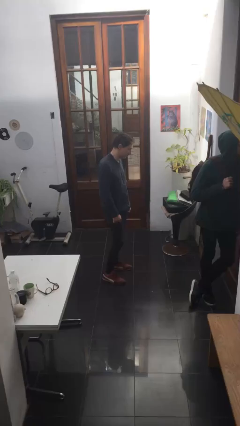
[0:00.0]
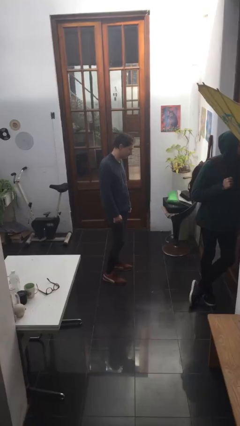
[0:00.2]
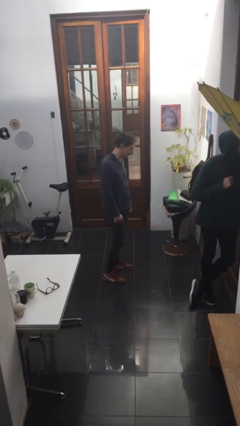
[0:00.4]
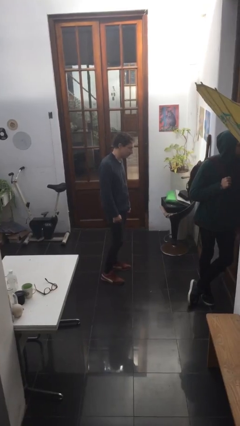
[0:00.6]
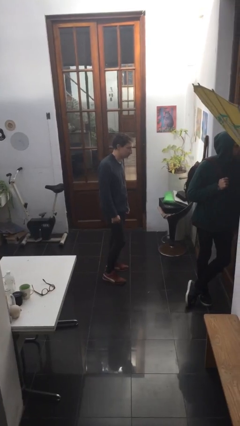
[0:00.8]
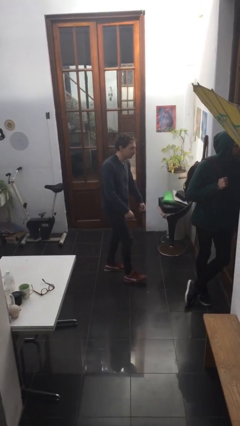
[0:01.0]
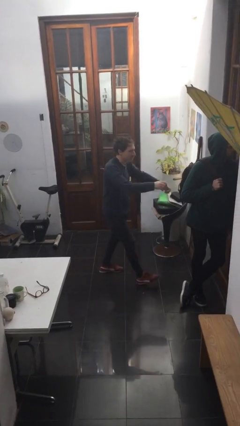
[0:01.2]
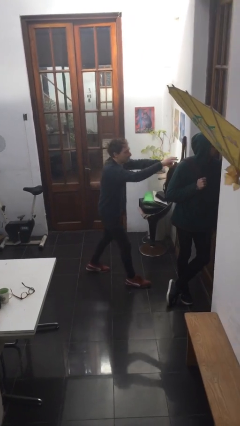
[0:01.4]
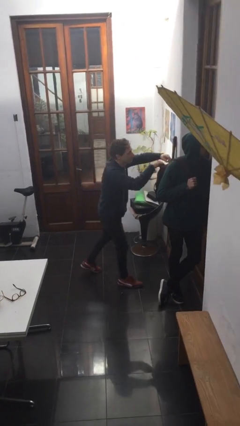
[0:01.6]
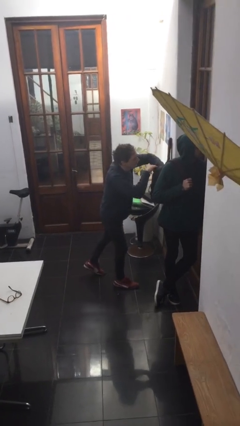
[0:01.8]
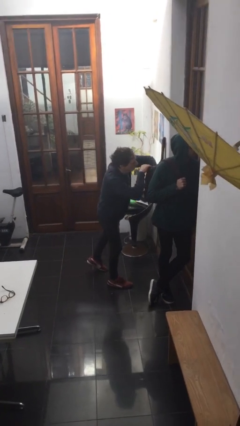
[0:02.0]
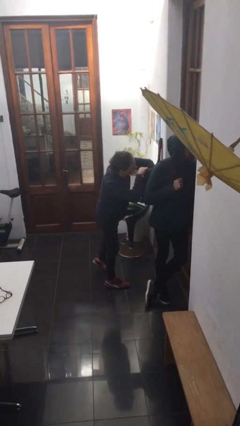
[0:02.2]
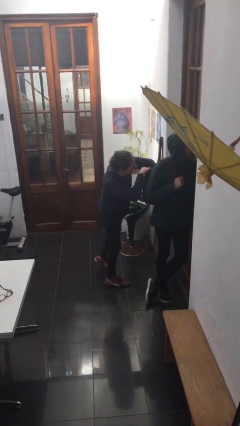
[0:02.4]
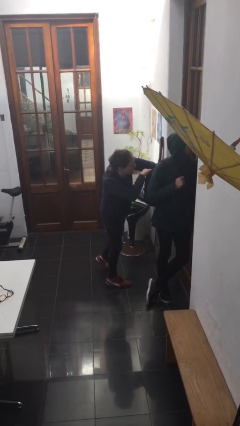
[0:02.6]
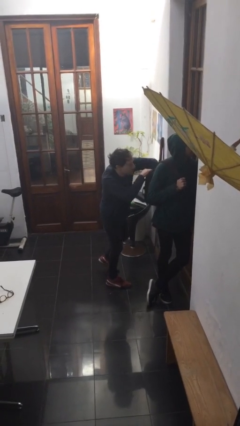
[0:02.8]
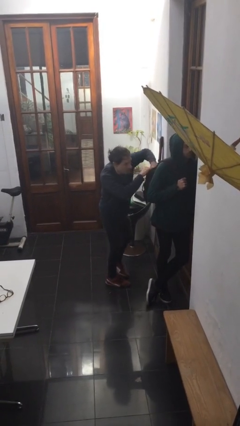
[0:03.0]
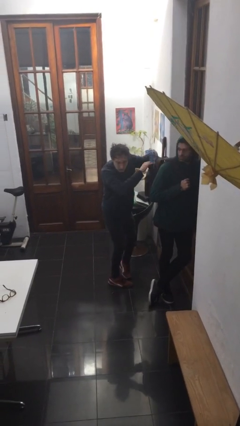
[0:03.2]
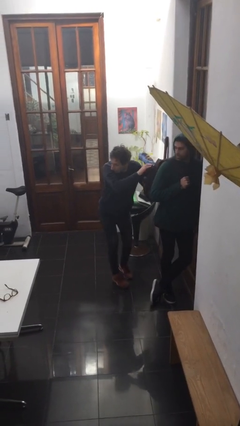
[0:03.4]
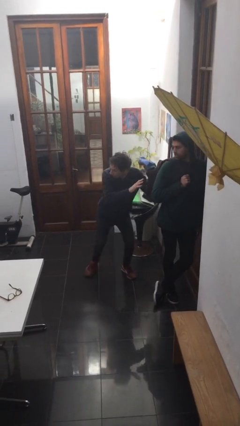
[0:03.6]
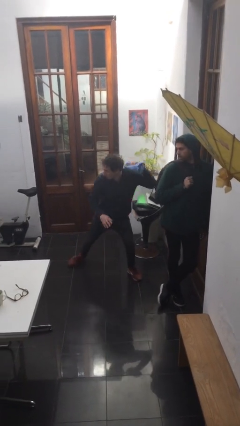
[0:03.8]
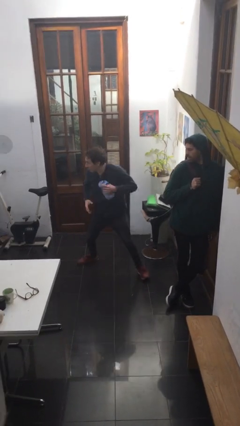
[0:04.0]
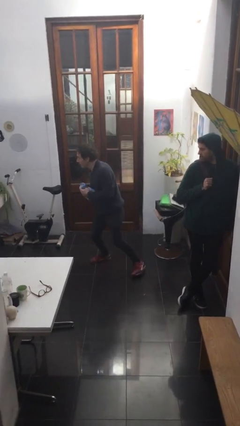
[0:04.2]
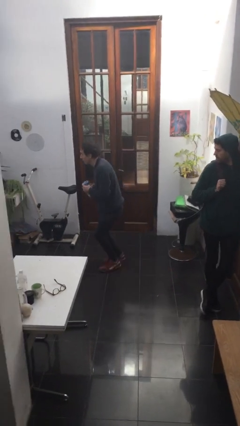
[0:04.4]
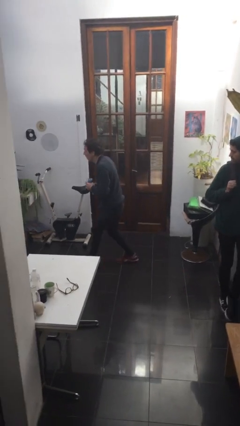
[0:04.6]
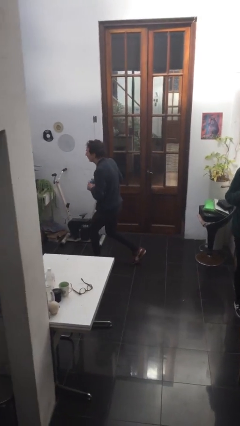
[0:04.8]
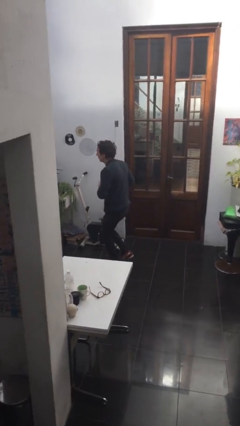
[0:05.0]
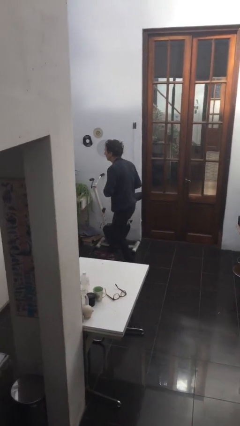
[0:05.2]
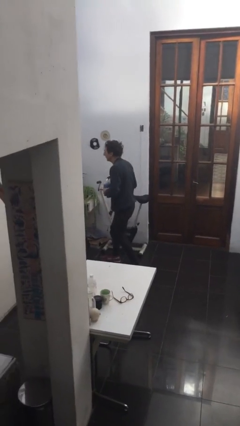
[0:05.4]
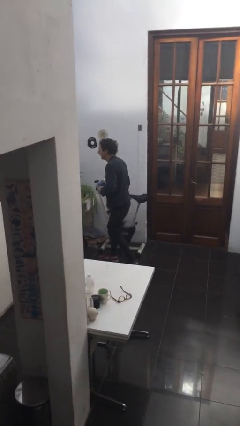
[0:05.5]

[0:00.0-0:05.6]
person steals object from person

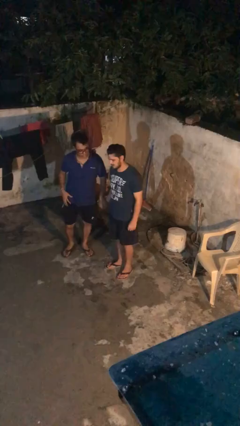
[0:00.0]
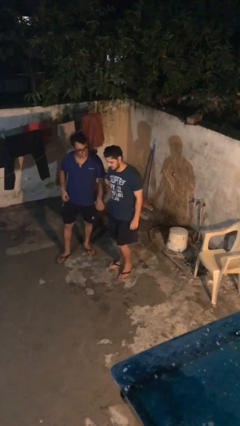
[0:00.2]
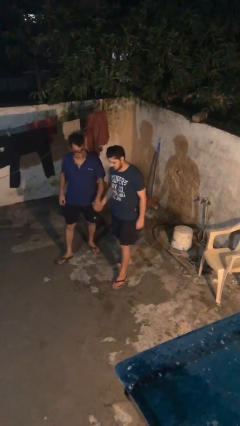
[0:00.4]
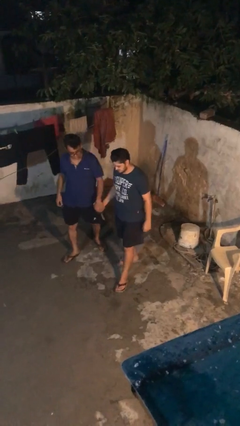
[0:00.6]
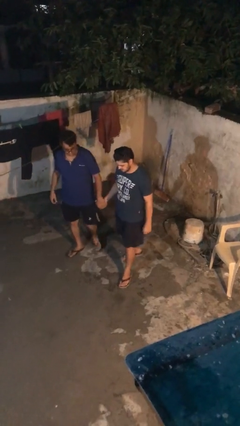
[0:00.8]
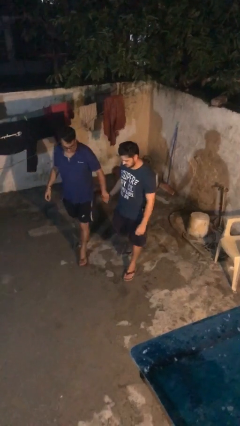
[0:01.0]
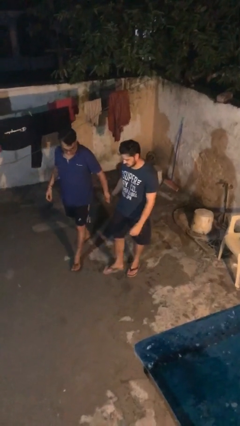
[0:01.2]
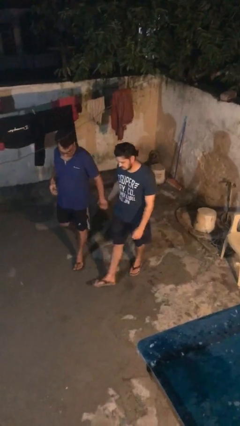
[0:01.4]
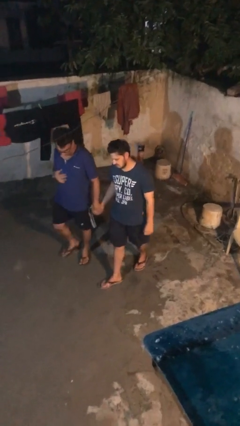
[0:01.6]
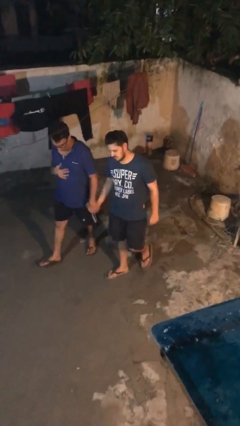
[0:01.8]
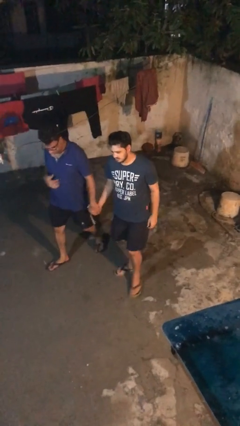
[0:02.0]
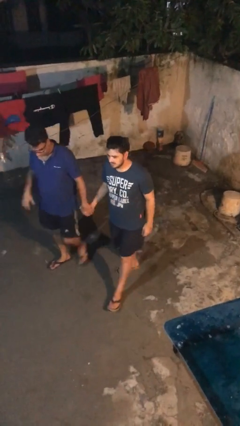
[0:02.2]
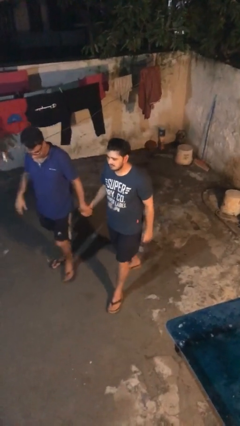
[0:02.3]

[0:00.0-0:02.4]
person holds hand

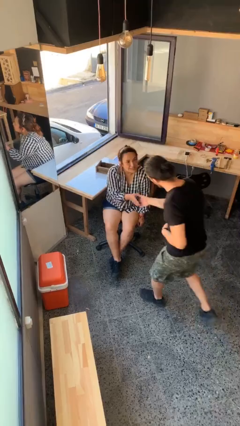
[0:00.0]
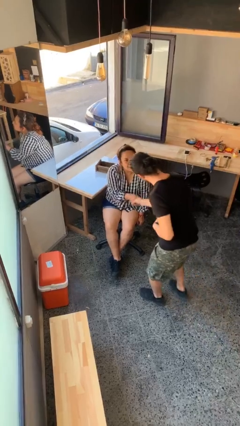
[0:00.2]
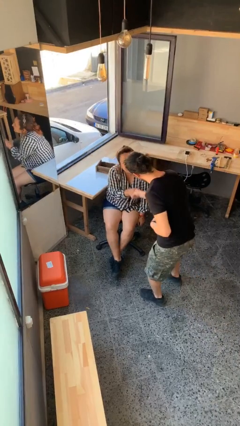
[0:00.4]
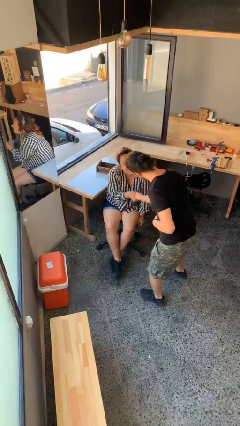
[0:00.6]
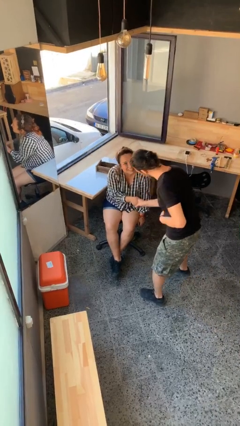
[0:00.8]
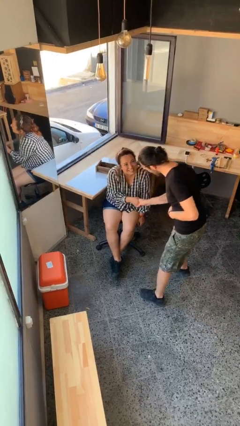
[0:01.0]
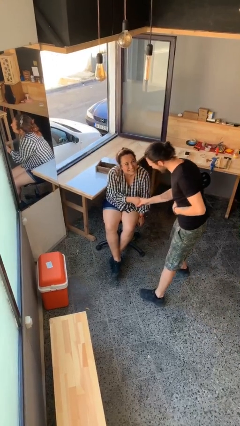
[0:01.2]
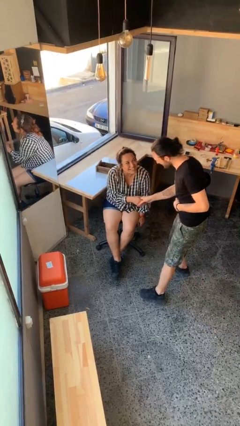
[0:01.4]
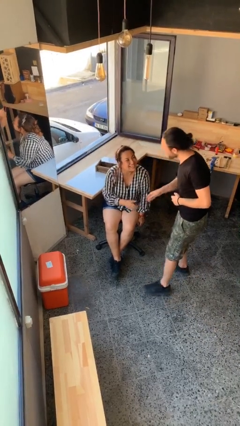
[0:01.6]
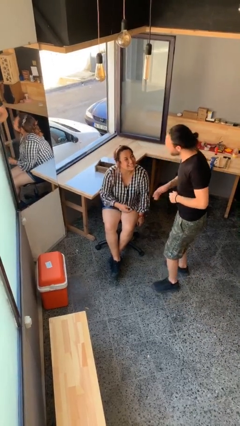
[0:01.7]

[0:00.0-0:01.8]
person shakes hand

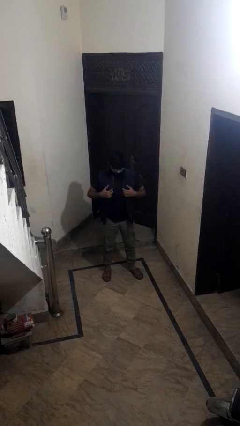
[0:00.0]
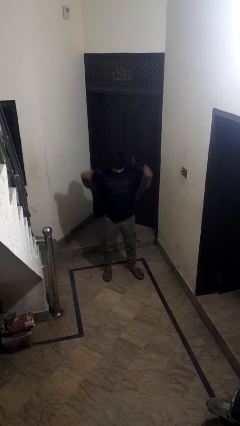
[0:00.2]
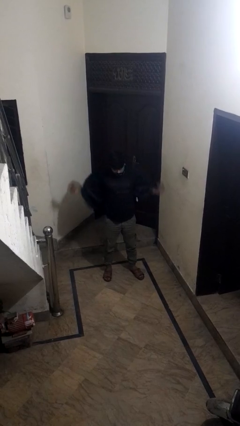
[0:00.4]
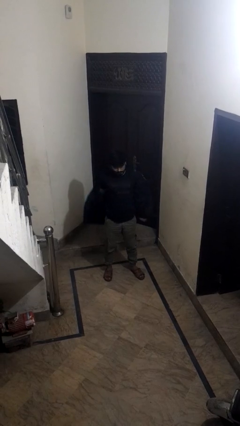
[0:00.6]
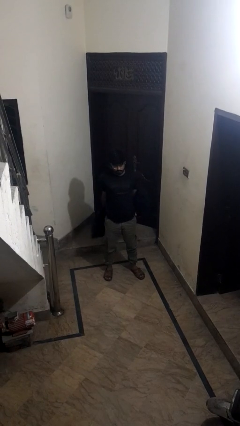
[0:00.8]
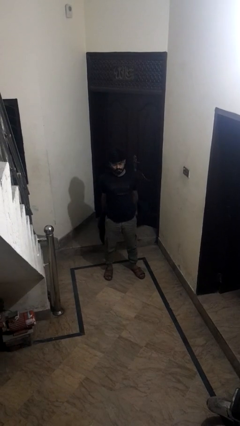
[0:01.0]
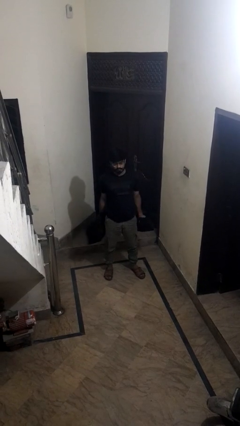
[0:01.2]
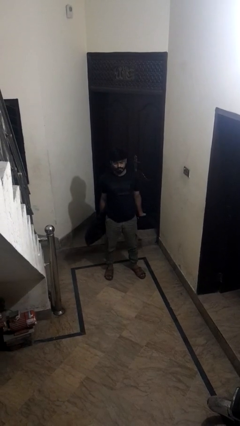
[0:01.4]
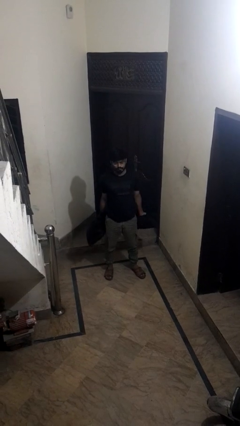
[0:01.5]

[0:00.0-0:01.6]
person takes off jacket

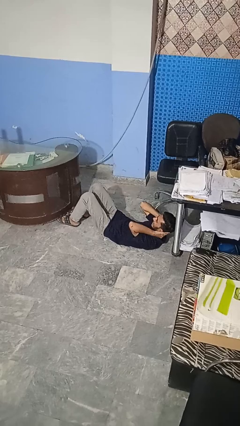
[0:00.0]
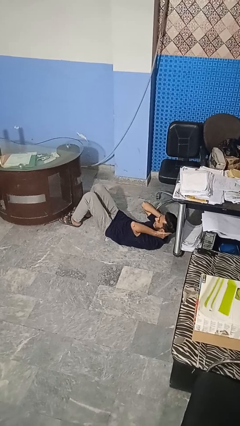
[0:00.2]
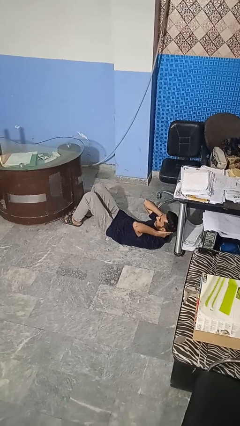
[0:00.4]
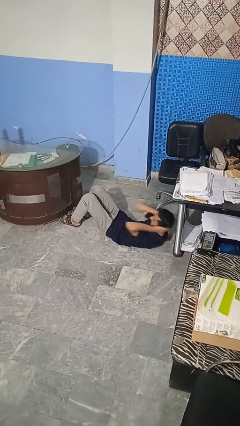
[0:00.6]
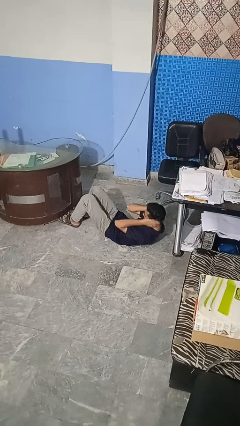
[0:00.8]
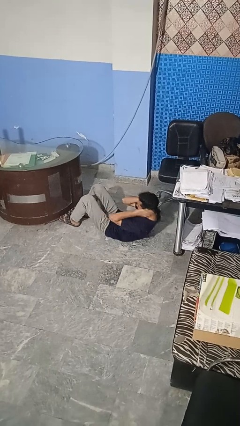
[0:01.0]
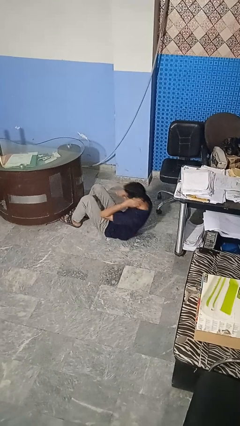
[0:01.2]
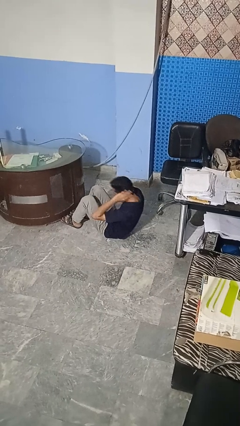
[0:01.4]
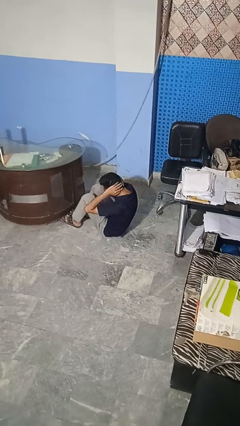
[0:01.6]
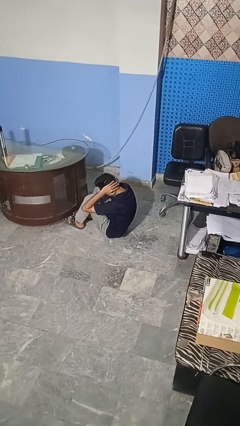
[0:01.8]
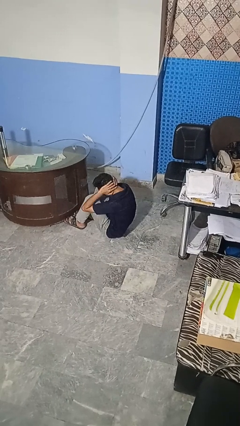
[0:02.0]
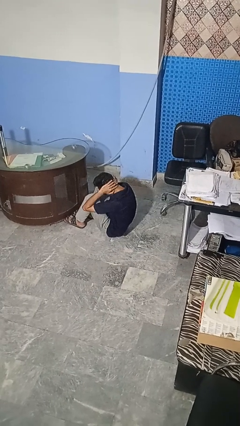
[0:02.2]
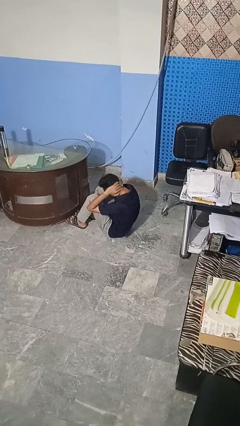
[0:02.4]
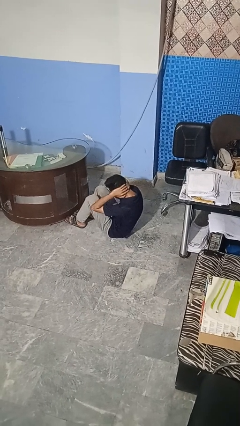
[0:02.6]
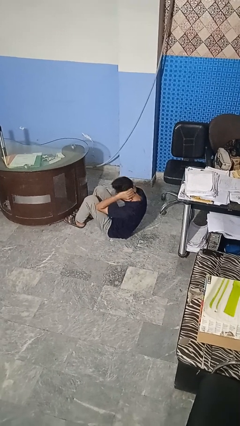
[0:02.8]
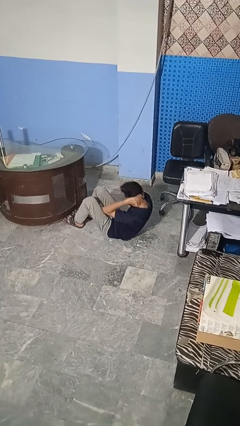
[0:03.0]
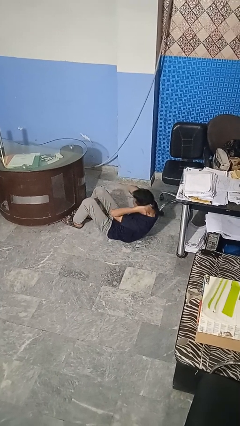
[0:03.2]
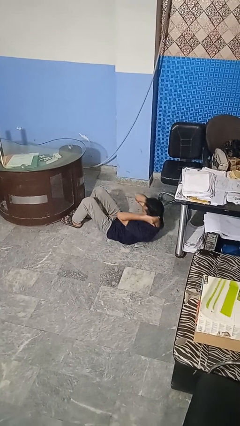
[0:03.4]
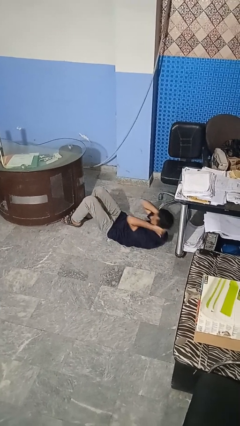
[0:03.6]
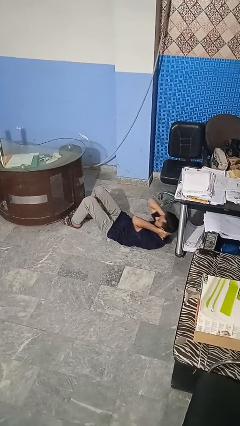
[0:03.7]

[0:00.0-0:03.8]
person exercises with situp

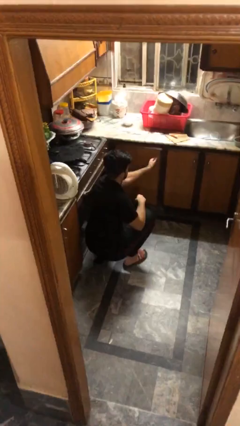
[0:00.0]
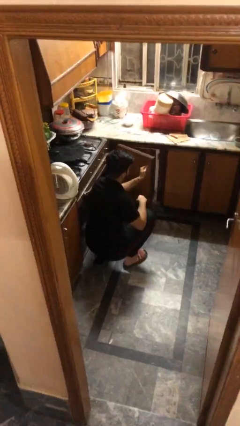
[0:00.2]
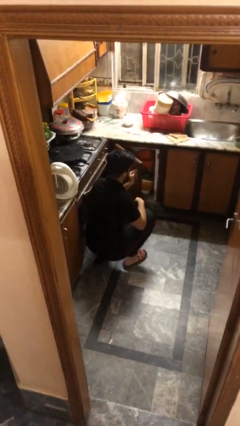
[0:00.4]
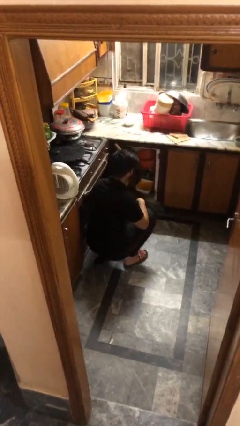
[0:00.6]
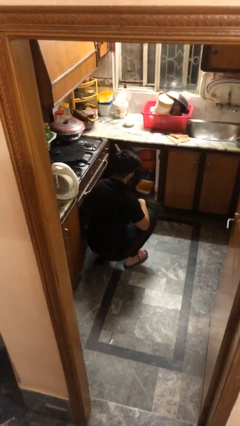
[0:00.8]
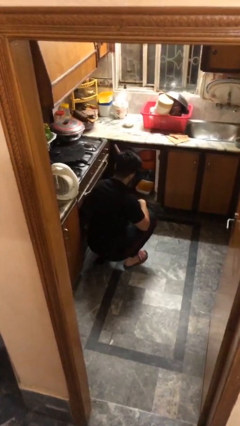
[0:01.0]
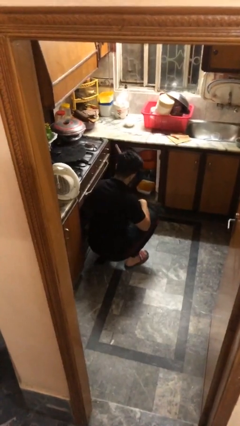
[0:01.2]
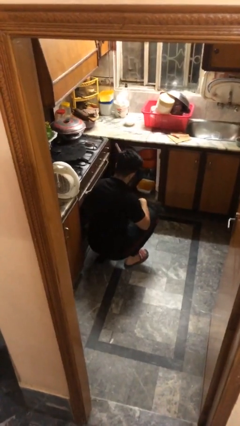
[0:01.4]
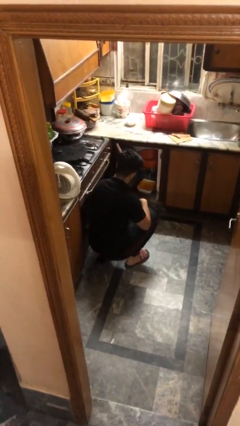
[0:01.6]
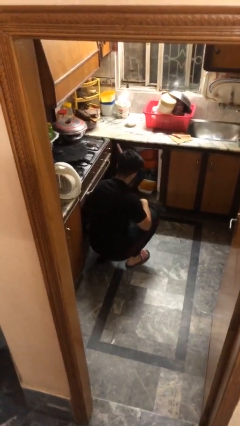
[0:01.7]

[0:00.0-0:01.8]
person opens kitchen drawer

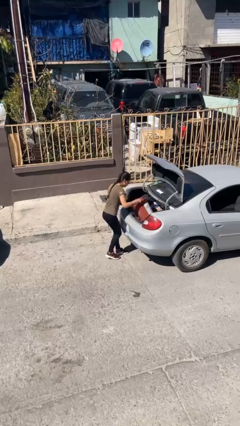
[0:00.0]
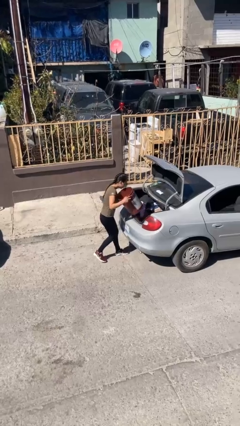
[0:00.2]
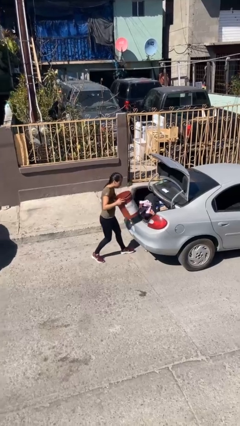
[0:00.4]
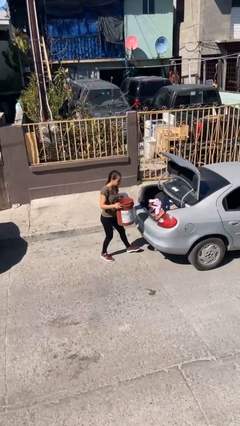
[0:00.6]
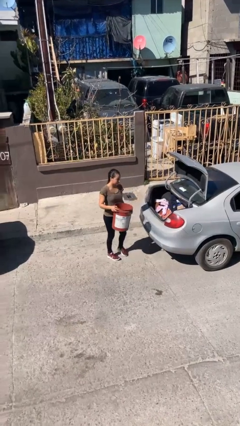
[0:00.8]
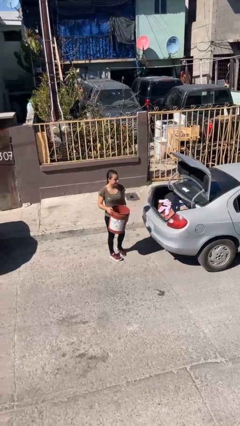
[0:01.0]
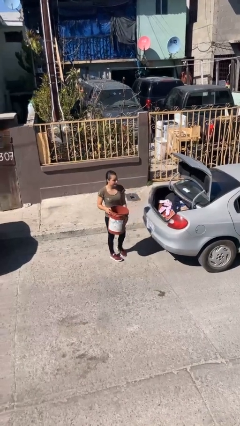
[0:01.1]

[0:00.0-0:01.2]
person unloads car
